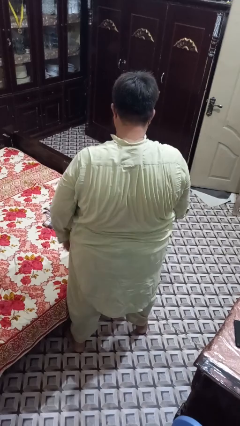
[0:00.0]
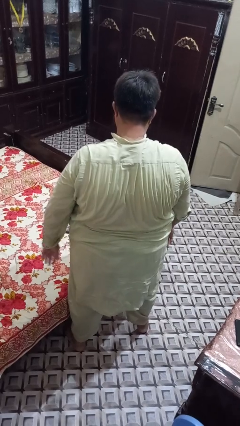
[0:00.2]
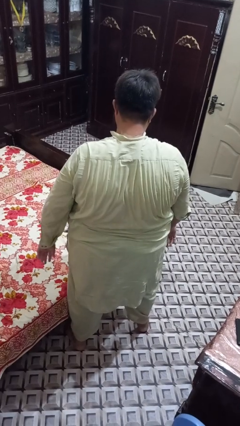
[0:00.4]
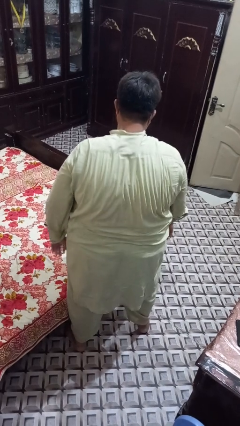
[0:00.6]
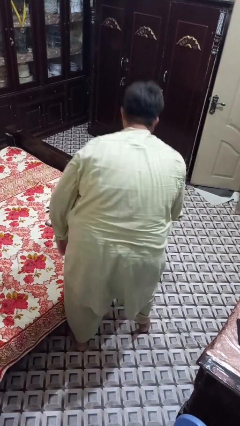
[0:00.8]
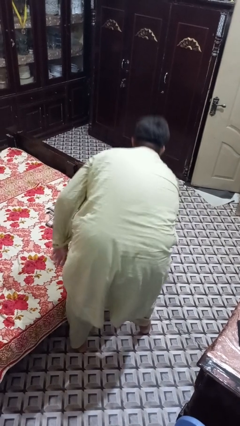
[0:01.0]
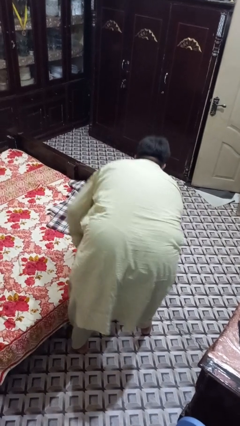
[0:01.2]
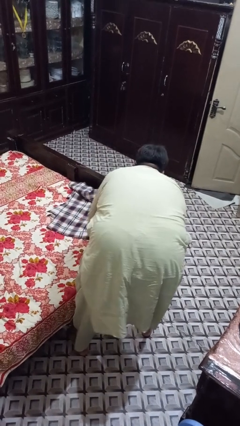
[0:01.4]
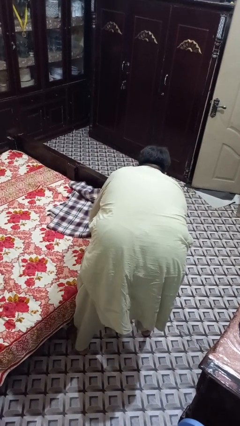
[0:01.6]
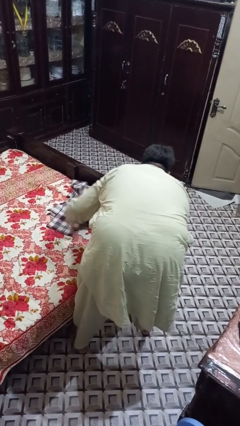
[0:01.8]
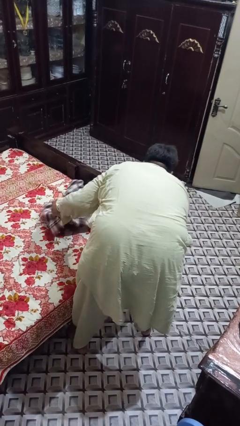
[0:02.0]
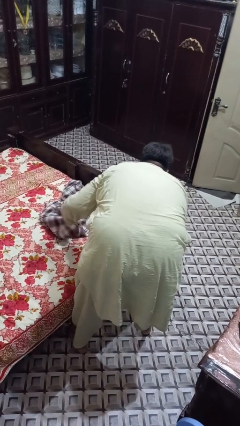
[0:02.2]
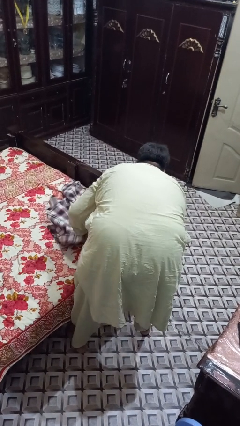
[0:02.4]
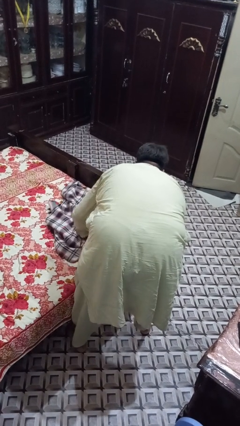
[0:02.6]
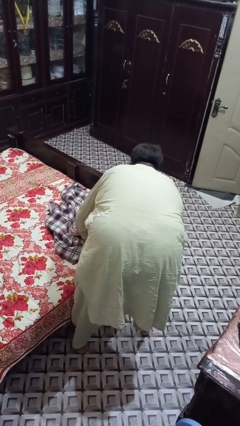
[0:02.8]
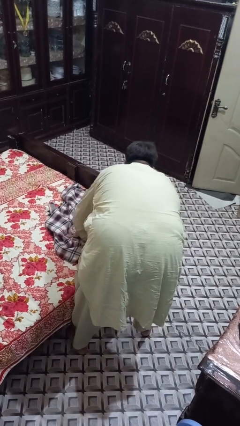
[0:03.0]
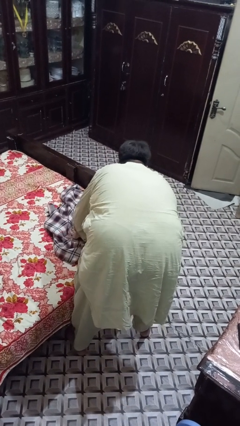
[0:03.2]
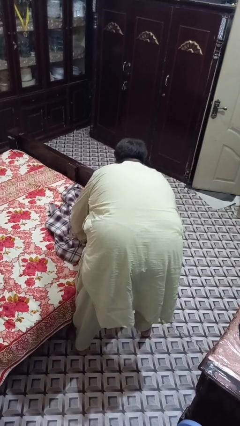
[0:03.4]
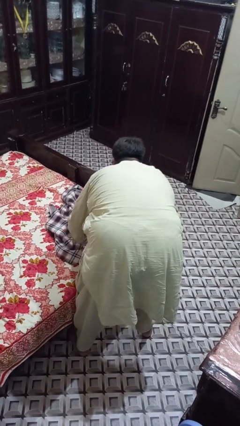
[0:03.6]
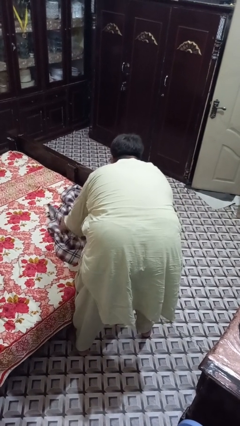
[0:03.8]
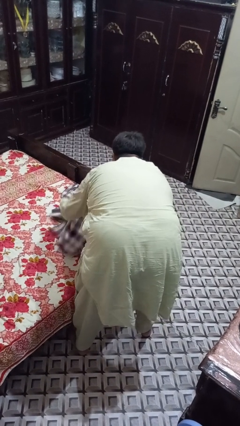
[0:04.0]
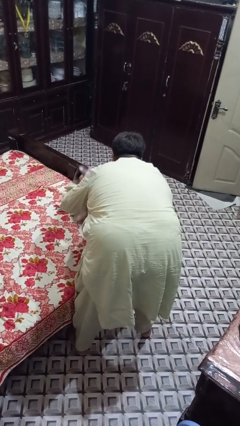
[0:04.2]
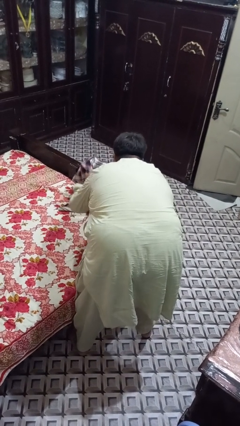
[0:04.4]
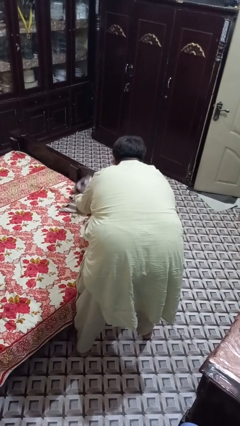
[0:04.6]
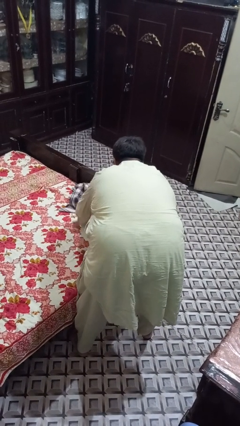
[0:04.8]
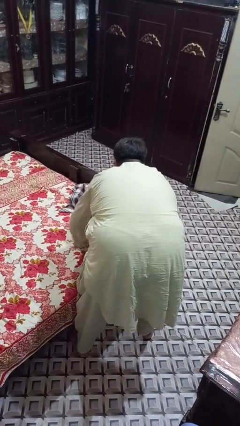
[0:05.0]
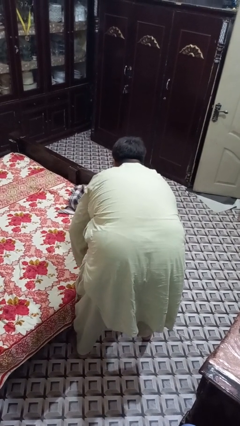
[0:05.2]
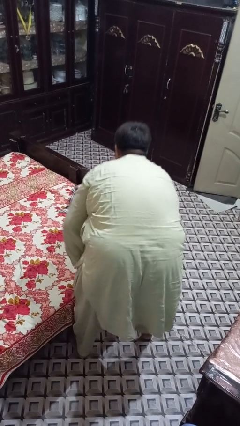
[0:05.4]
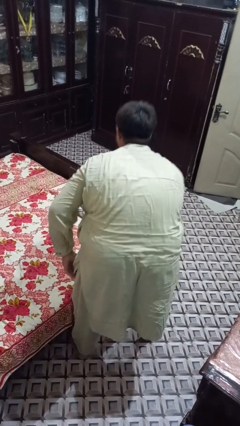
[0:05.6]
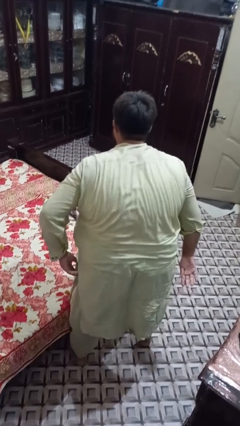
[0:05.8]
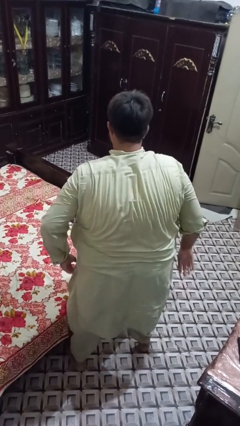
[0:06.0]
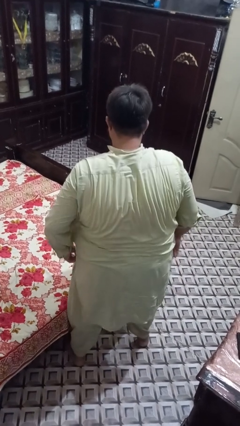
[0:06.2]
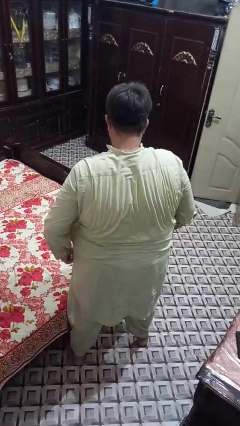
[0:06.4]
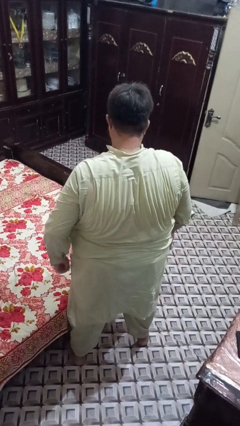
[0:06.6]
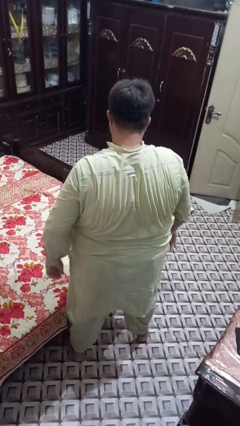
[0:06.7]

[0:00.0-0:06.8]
person makes bed

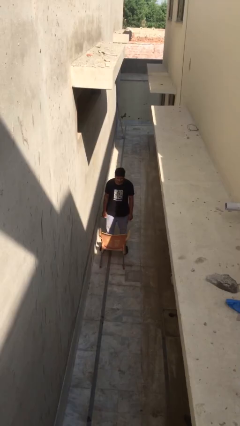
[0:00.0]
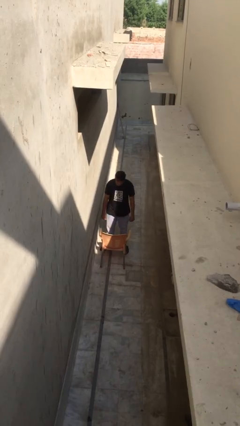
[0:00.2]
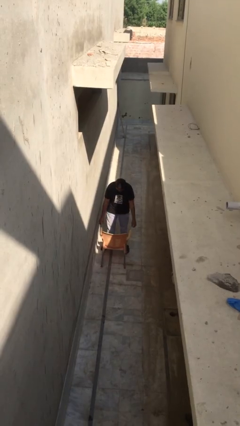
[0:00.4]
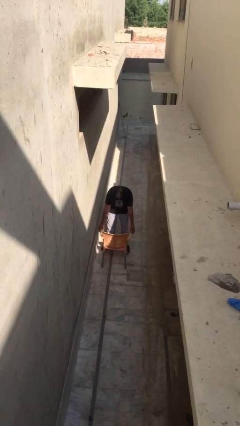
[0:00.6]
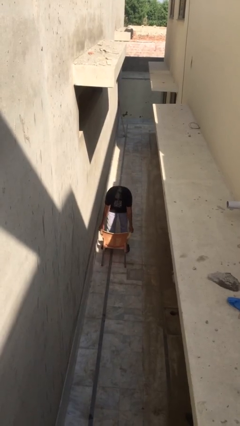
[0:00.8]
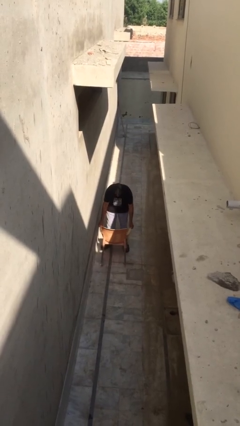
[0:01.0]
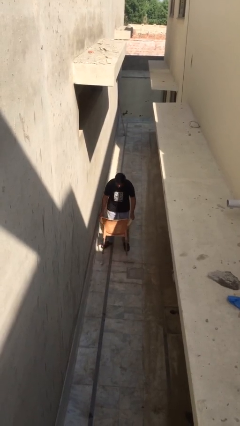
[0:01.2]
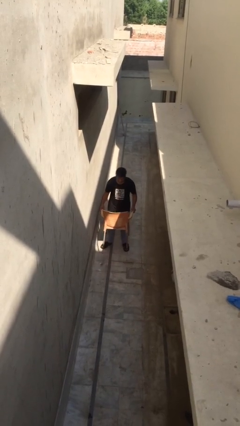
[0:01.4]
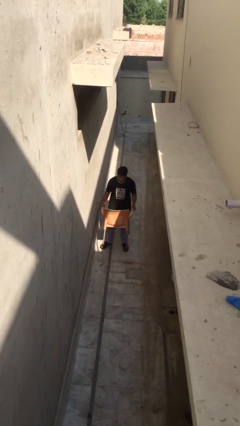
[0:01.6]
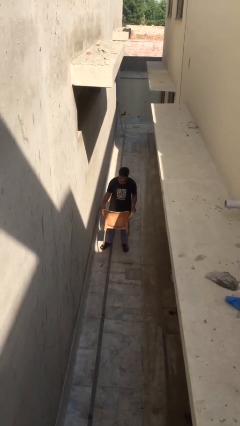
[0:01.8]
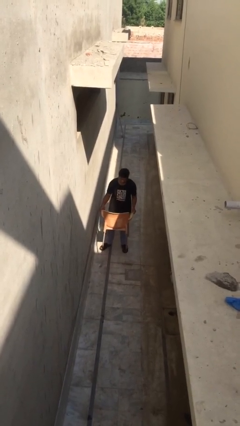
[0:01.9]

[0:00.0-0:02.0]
person picks up object from floor

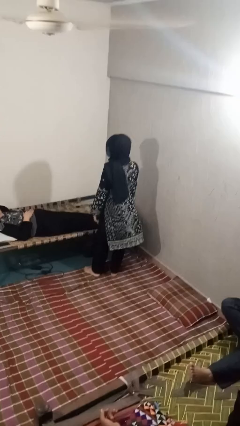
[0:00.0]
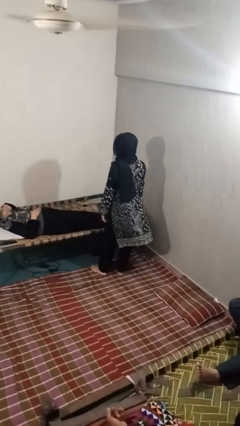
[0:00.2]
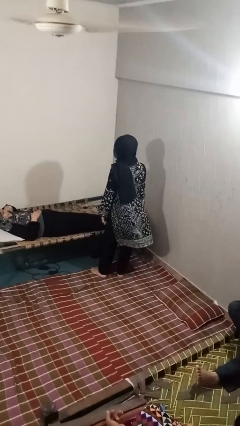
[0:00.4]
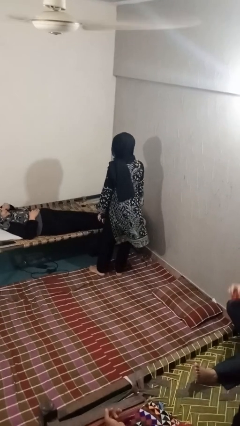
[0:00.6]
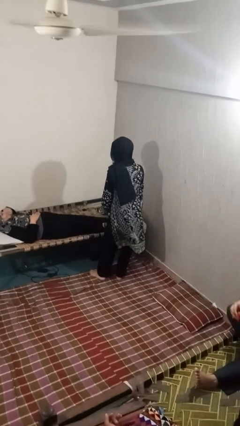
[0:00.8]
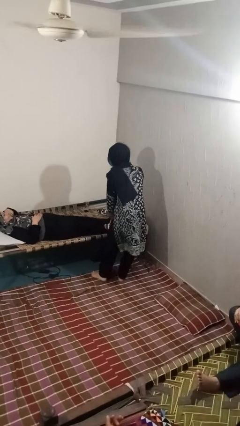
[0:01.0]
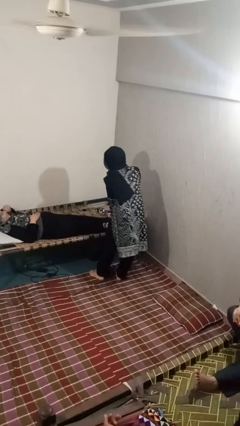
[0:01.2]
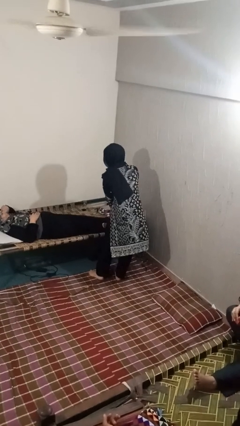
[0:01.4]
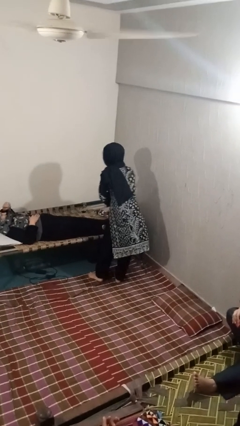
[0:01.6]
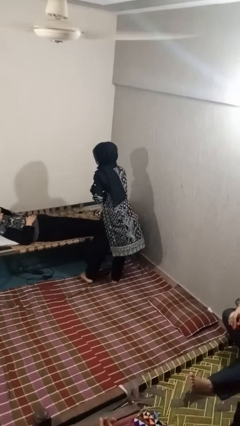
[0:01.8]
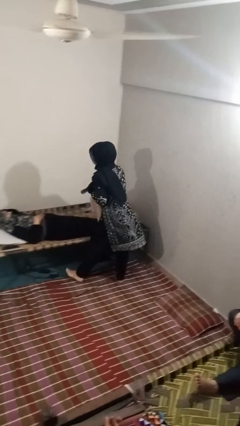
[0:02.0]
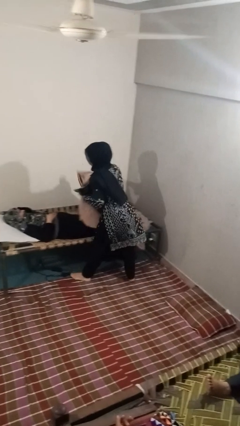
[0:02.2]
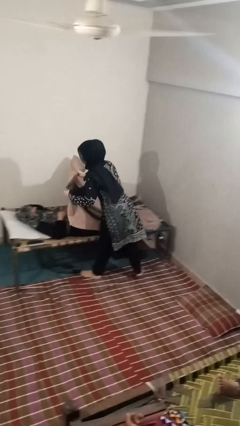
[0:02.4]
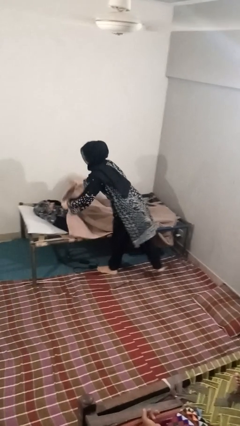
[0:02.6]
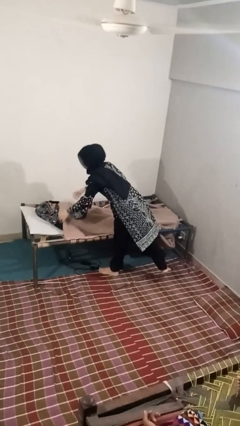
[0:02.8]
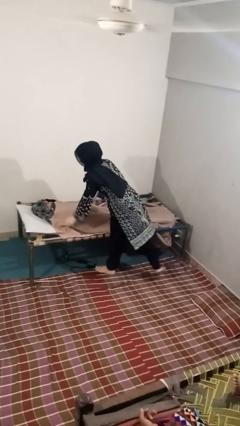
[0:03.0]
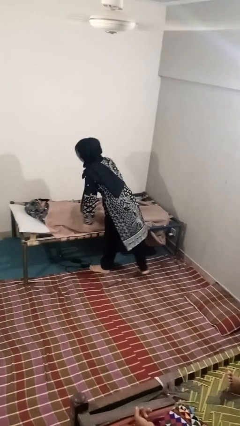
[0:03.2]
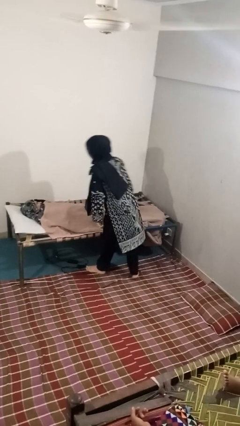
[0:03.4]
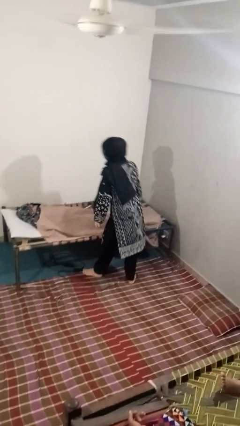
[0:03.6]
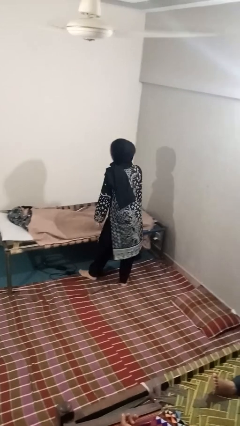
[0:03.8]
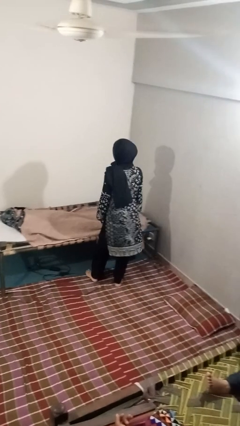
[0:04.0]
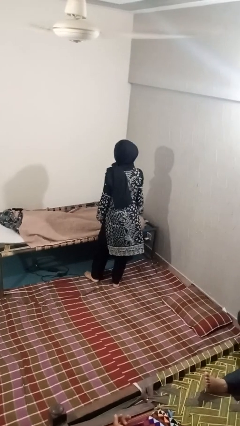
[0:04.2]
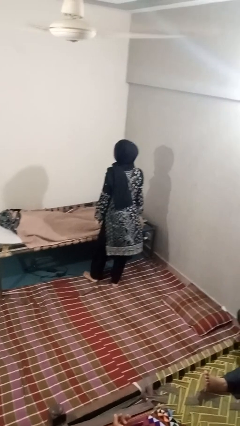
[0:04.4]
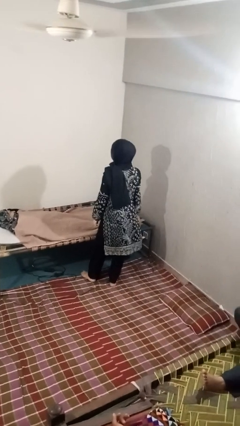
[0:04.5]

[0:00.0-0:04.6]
person covers friend with blanket

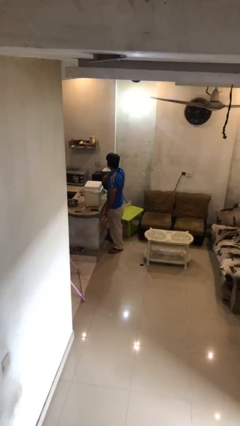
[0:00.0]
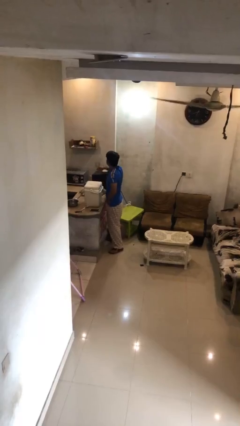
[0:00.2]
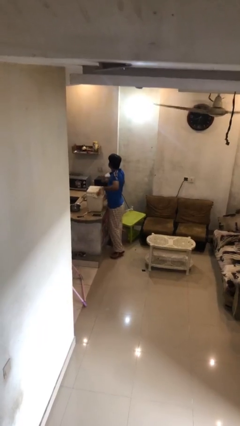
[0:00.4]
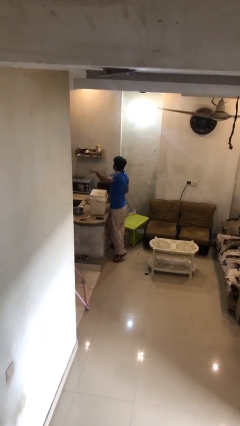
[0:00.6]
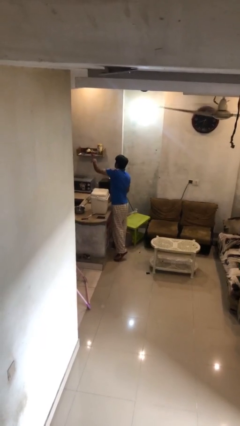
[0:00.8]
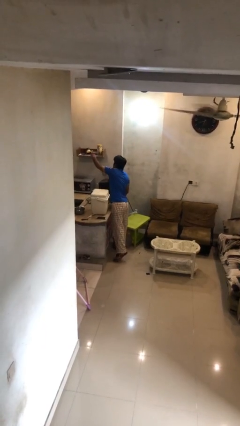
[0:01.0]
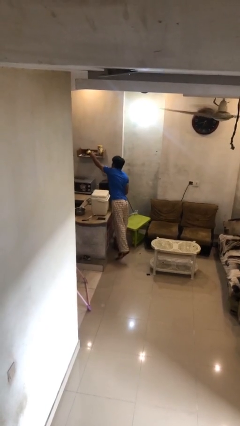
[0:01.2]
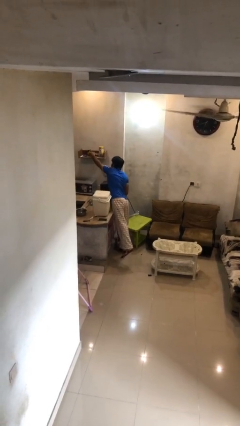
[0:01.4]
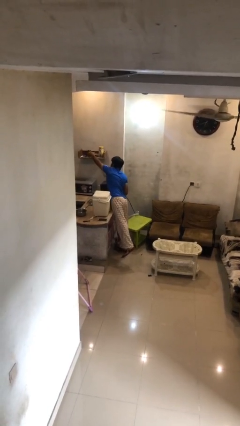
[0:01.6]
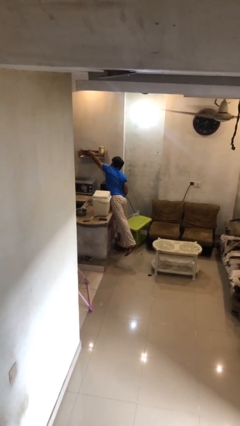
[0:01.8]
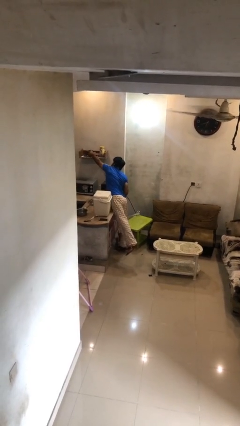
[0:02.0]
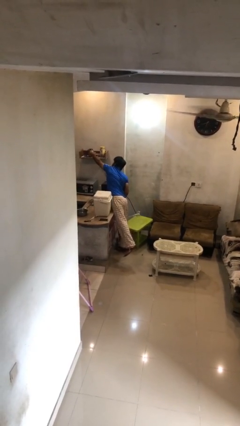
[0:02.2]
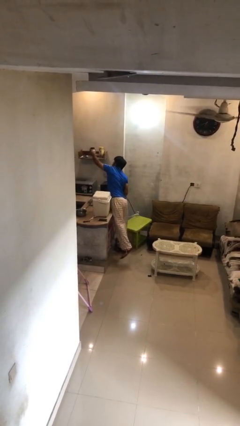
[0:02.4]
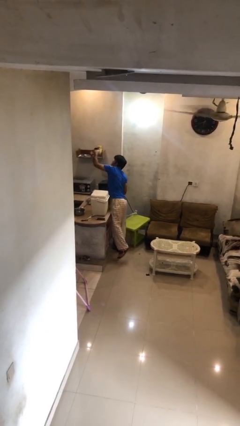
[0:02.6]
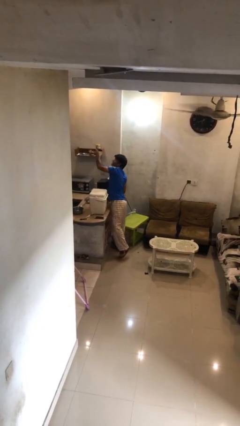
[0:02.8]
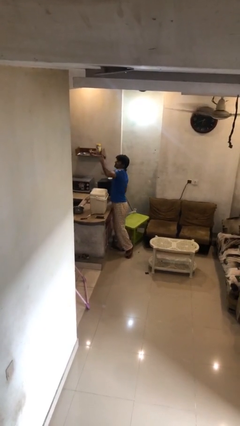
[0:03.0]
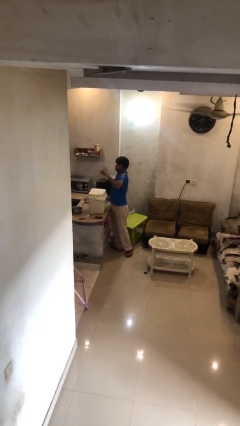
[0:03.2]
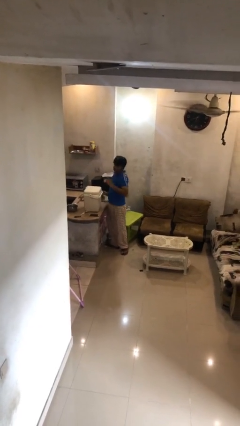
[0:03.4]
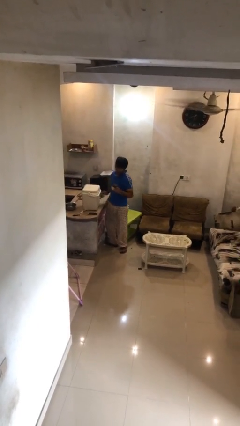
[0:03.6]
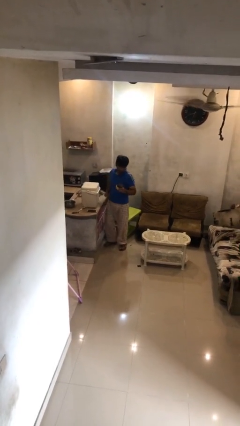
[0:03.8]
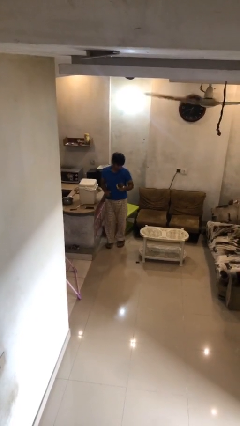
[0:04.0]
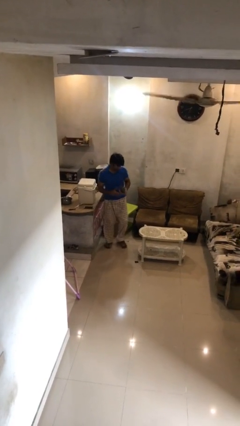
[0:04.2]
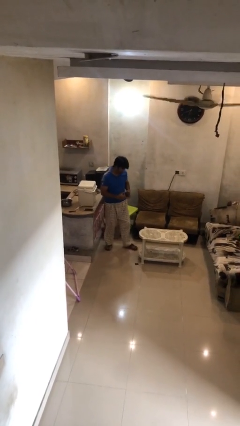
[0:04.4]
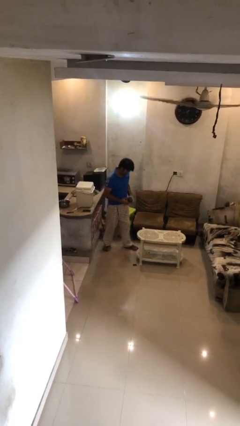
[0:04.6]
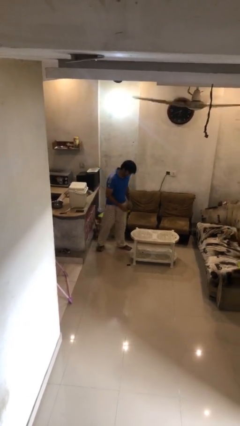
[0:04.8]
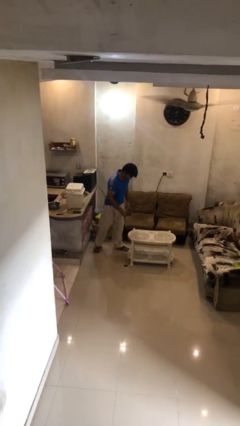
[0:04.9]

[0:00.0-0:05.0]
person picks up object from shelf
